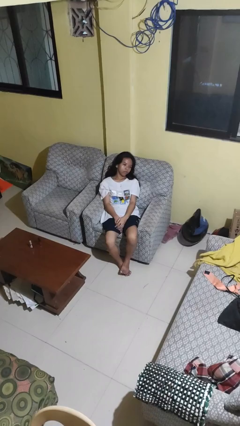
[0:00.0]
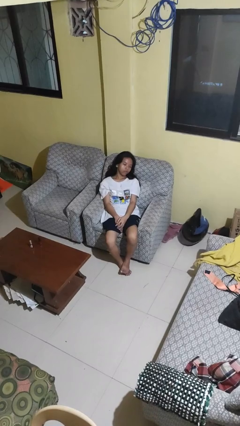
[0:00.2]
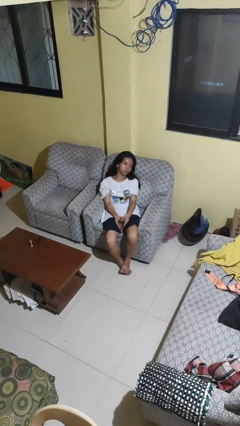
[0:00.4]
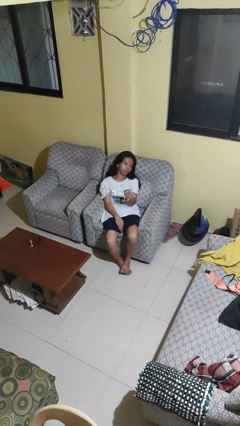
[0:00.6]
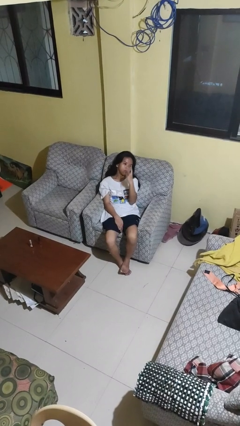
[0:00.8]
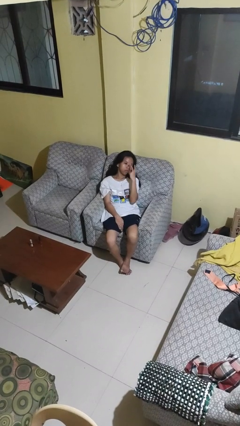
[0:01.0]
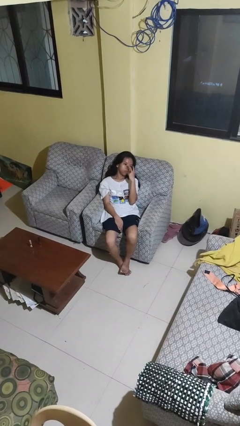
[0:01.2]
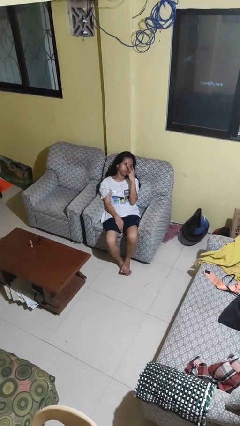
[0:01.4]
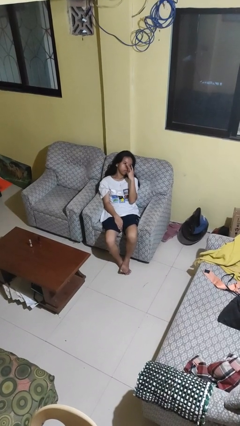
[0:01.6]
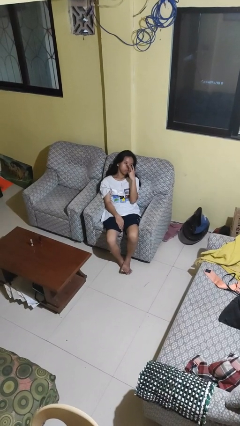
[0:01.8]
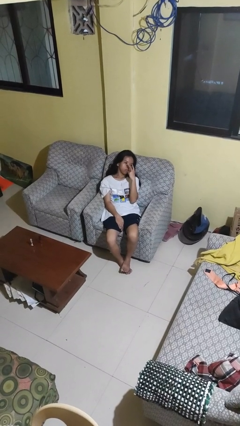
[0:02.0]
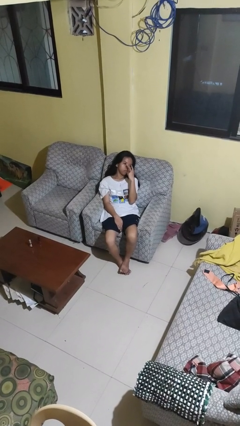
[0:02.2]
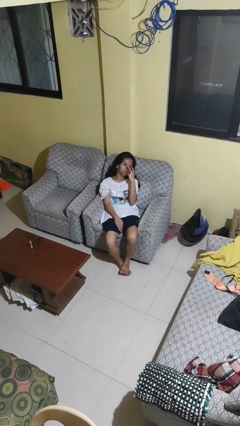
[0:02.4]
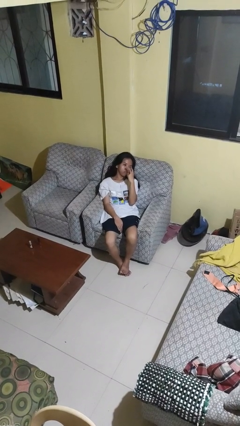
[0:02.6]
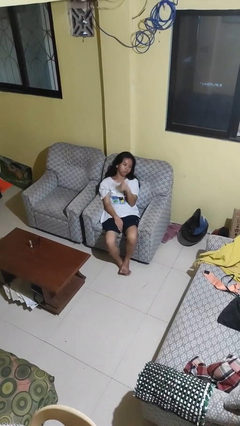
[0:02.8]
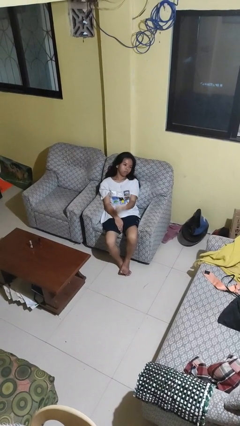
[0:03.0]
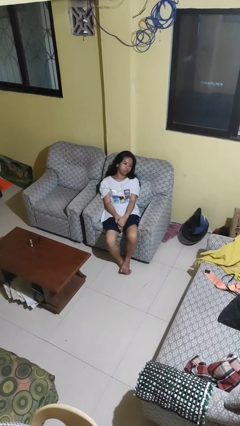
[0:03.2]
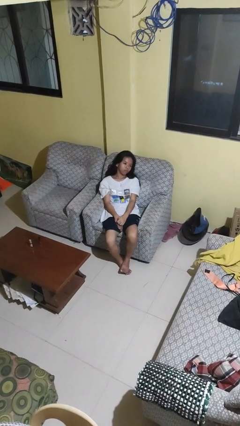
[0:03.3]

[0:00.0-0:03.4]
person gestures watch closely

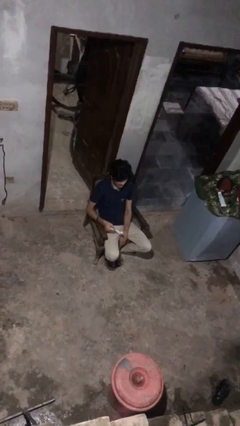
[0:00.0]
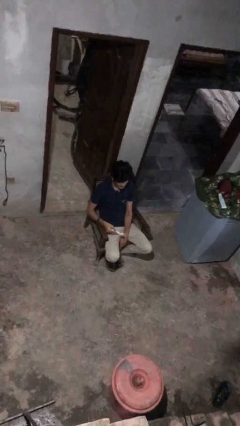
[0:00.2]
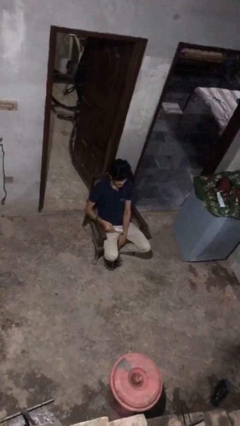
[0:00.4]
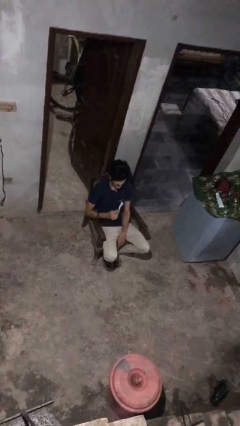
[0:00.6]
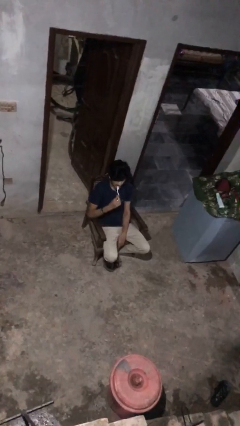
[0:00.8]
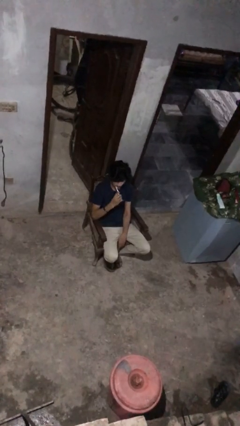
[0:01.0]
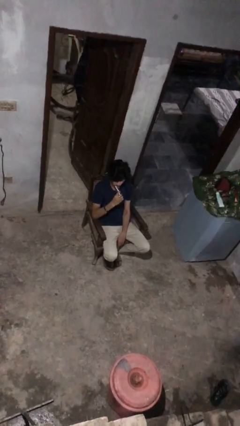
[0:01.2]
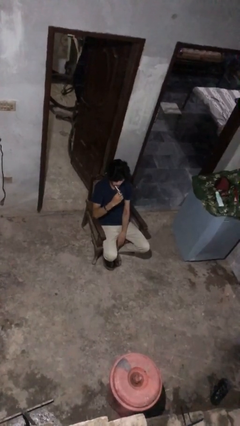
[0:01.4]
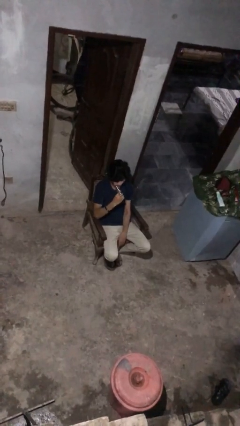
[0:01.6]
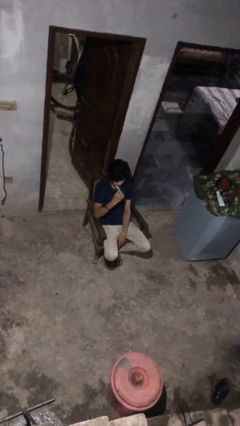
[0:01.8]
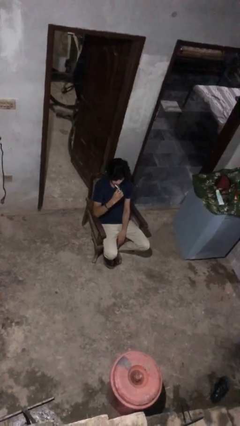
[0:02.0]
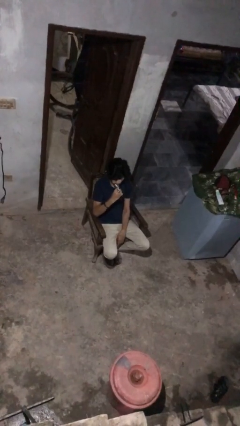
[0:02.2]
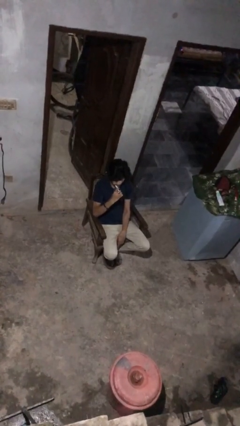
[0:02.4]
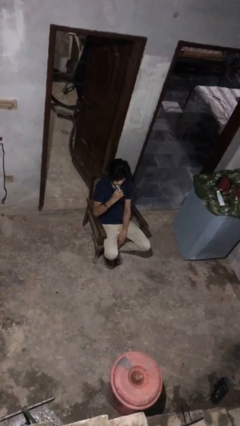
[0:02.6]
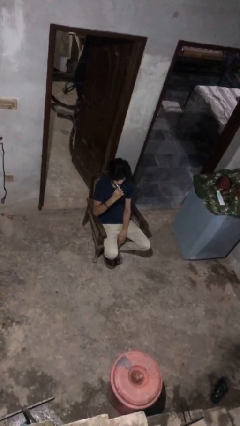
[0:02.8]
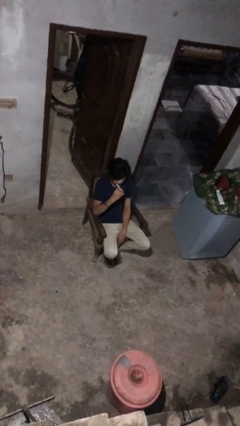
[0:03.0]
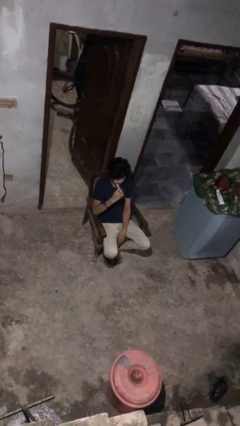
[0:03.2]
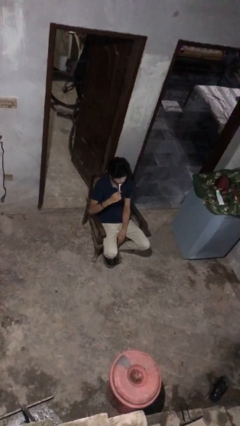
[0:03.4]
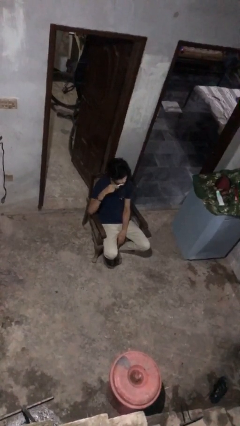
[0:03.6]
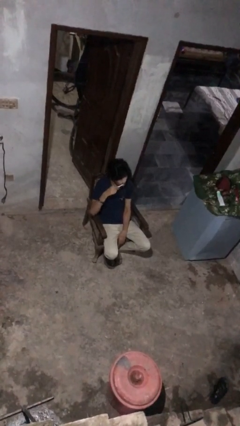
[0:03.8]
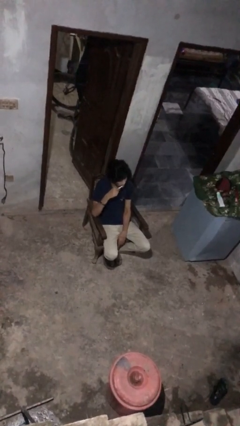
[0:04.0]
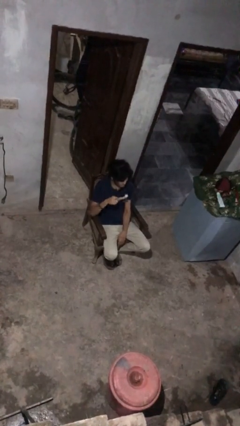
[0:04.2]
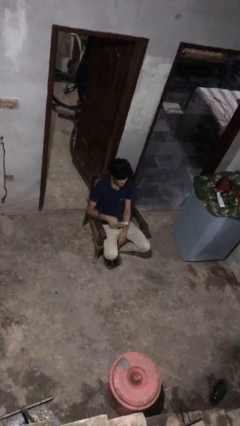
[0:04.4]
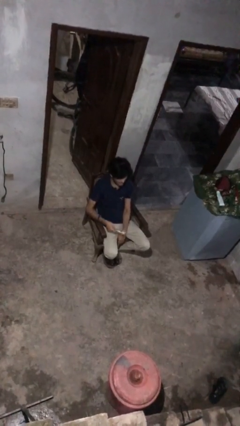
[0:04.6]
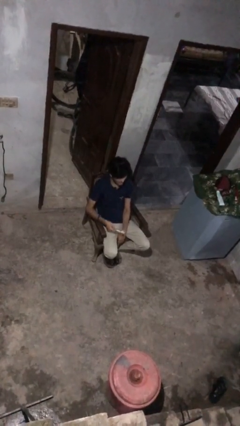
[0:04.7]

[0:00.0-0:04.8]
person brushes teeth

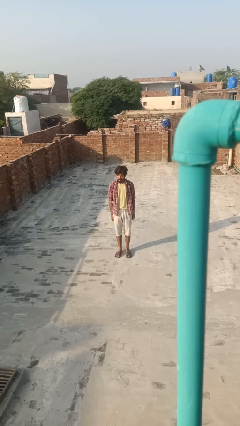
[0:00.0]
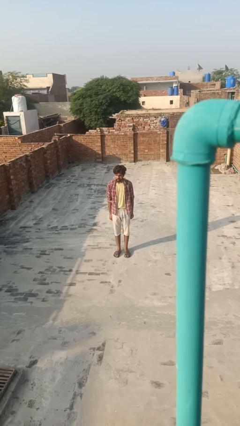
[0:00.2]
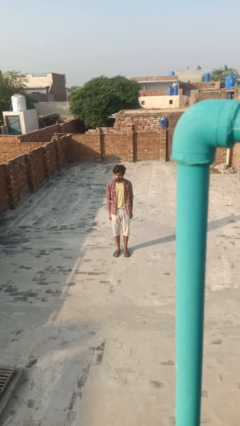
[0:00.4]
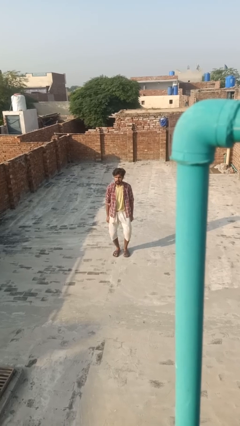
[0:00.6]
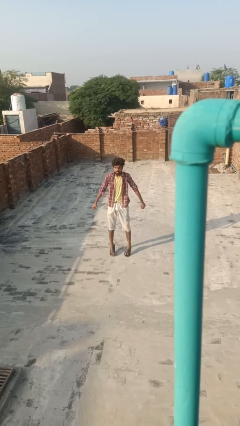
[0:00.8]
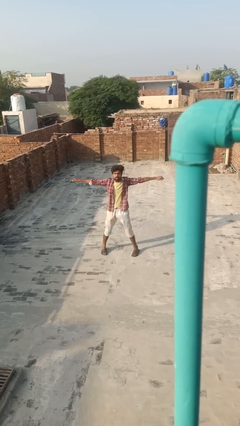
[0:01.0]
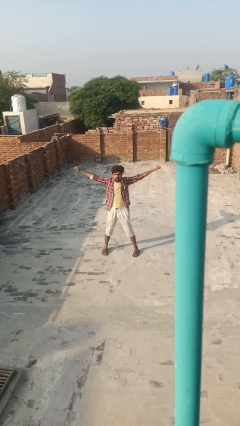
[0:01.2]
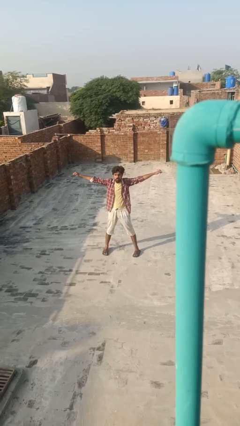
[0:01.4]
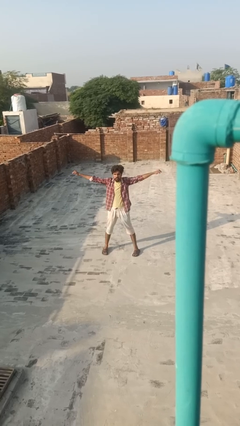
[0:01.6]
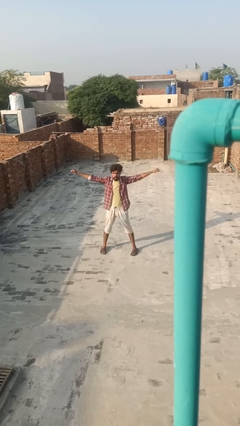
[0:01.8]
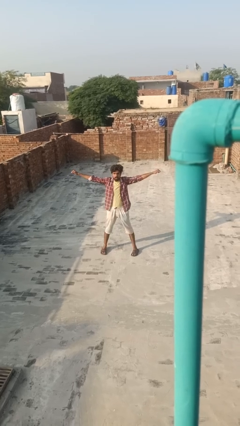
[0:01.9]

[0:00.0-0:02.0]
person exercises with jumping jacks

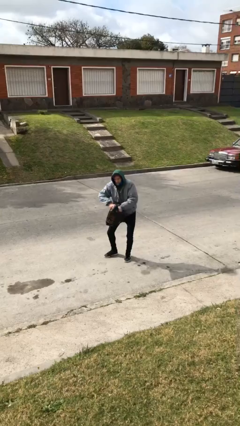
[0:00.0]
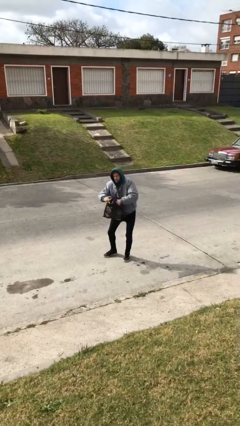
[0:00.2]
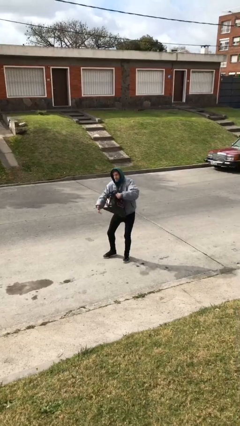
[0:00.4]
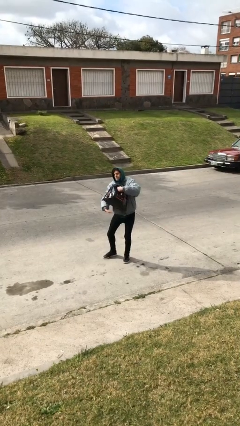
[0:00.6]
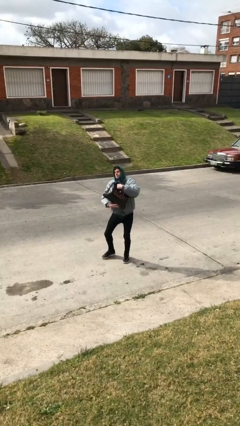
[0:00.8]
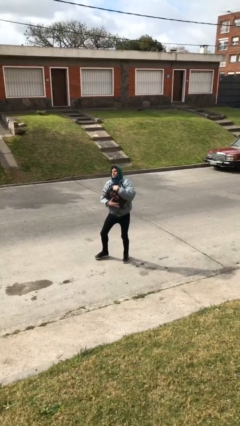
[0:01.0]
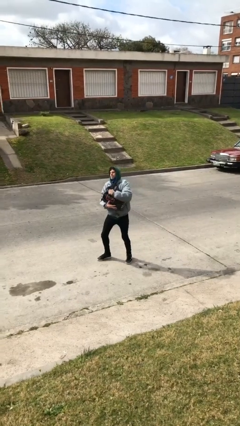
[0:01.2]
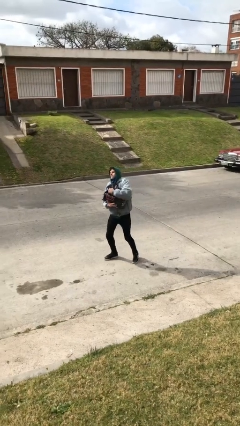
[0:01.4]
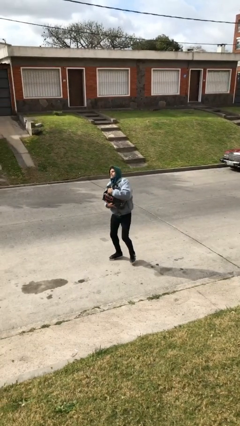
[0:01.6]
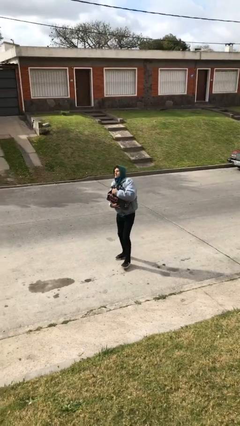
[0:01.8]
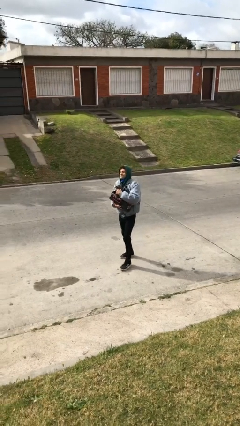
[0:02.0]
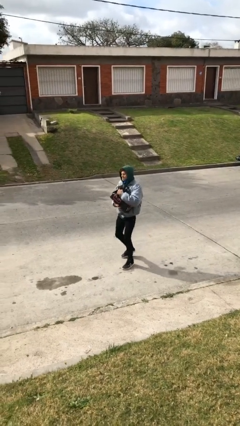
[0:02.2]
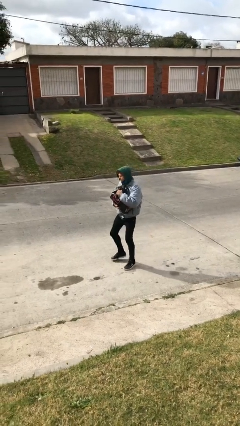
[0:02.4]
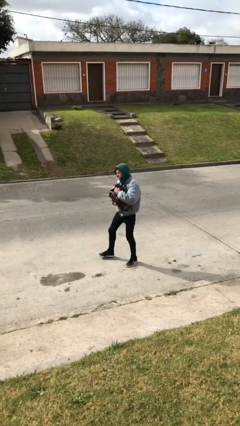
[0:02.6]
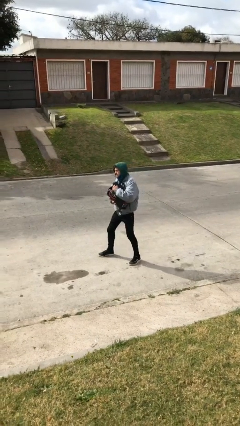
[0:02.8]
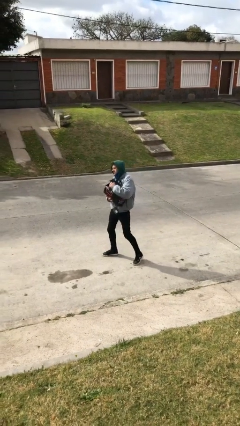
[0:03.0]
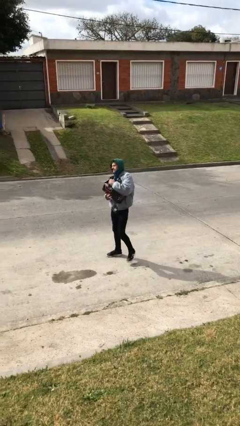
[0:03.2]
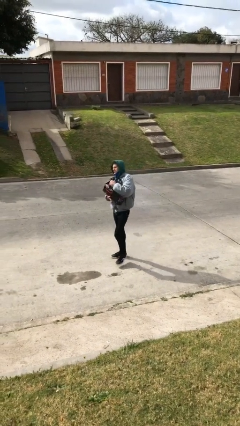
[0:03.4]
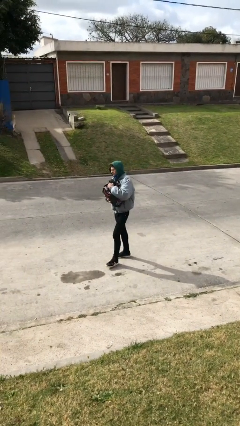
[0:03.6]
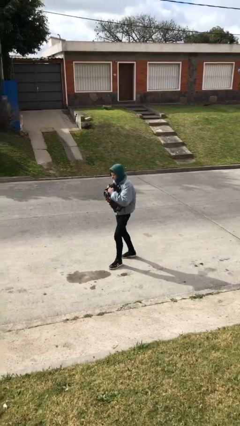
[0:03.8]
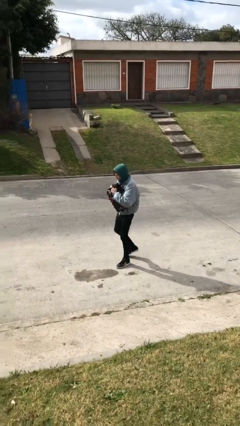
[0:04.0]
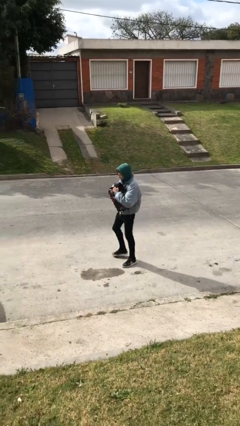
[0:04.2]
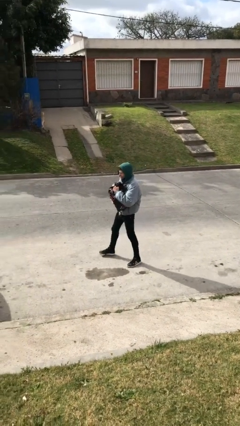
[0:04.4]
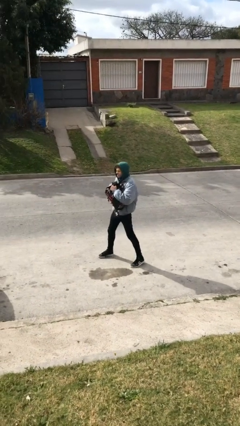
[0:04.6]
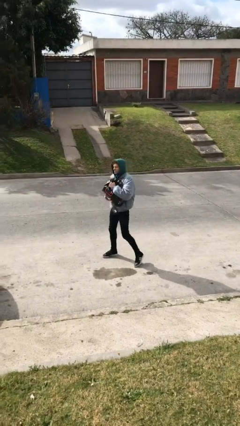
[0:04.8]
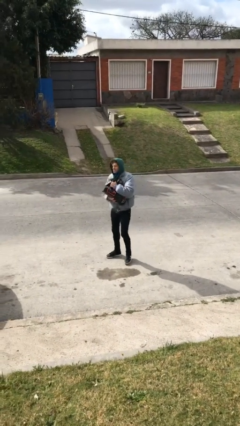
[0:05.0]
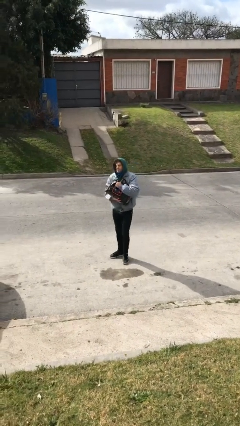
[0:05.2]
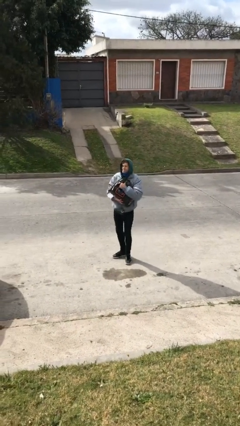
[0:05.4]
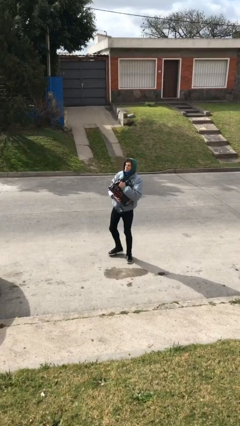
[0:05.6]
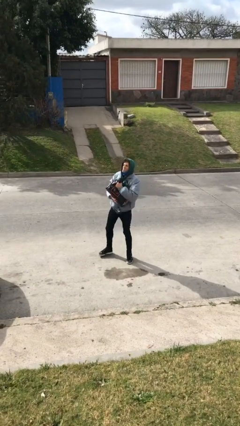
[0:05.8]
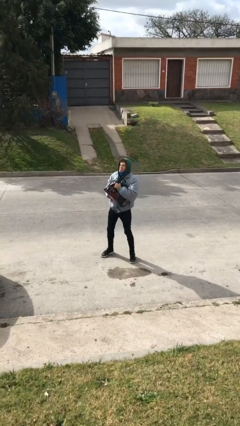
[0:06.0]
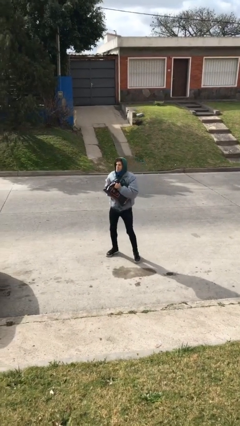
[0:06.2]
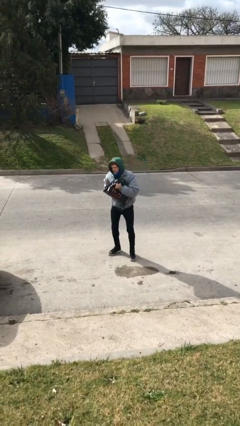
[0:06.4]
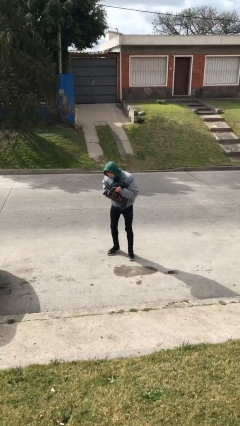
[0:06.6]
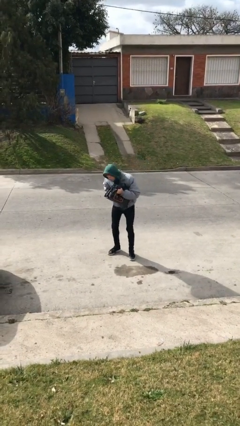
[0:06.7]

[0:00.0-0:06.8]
person carries heavy object

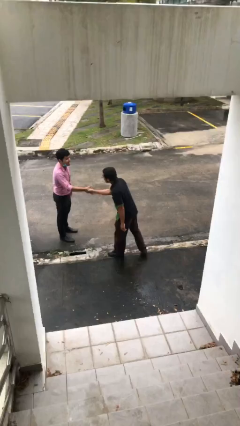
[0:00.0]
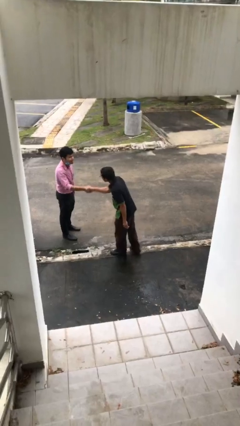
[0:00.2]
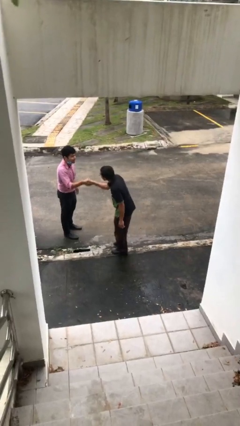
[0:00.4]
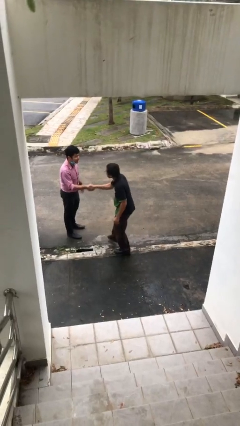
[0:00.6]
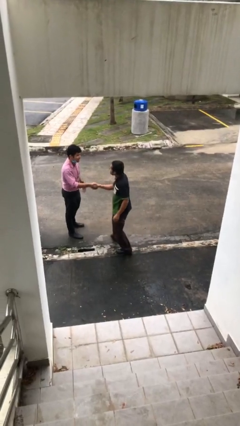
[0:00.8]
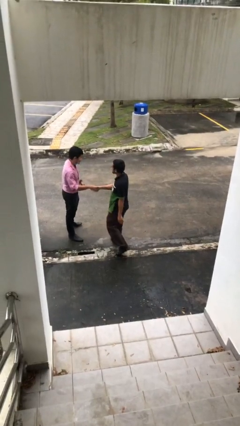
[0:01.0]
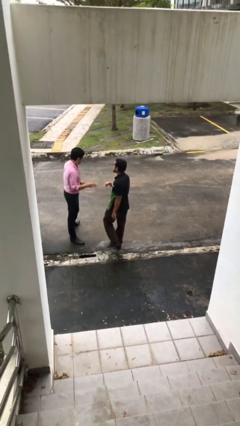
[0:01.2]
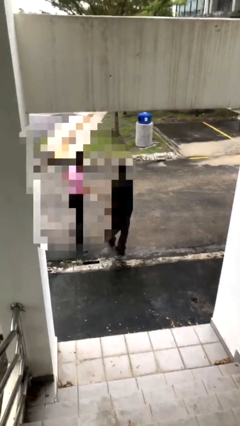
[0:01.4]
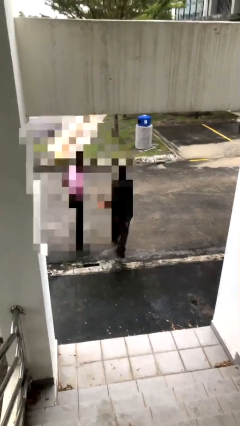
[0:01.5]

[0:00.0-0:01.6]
person shakes hand
